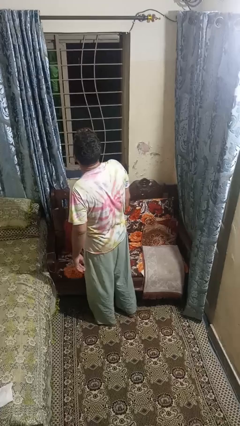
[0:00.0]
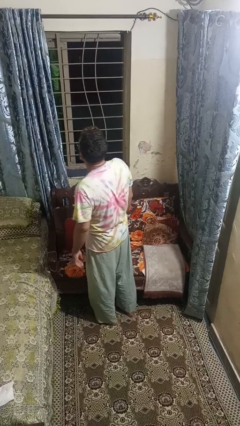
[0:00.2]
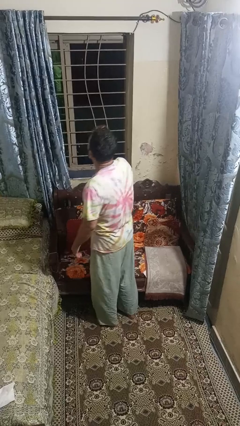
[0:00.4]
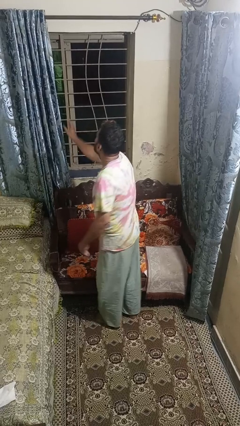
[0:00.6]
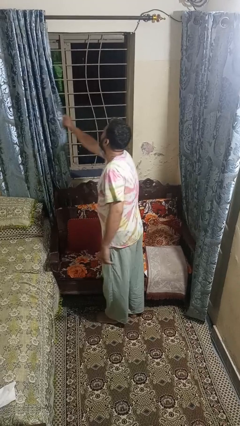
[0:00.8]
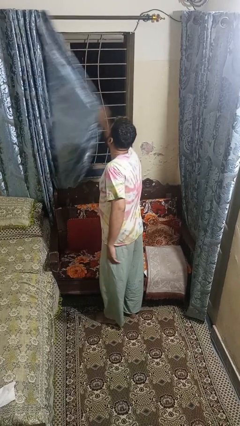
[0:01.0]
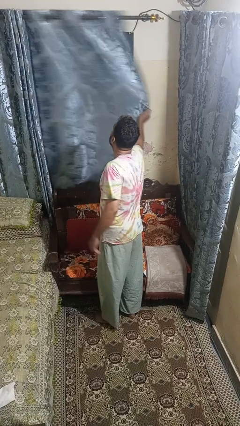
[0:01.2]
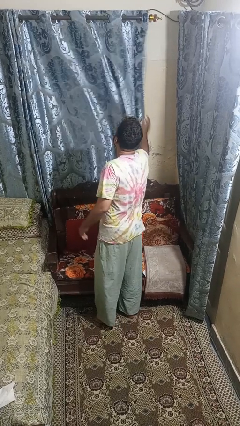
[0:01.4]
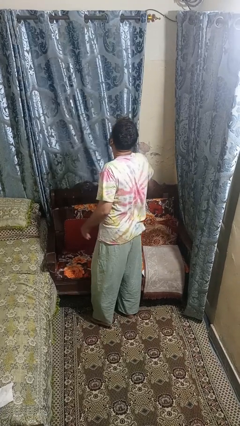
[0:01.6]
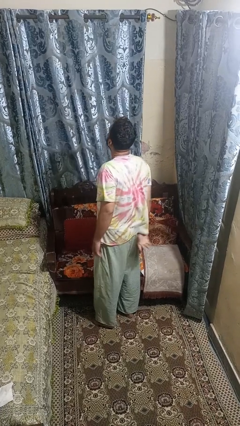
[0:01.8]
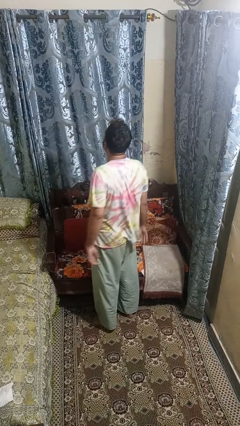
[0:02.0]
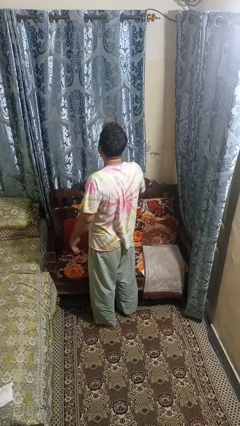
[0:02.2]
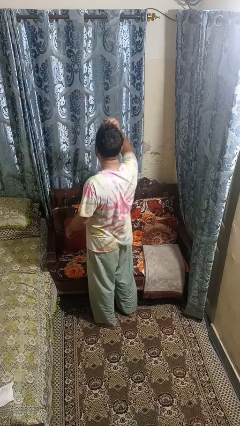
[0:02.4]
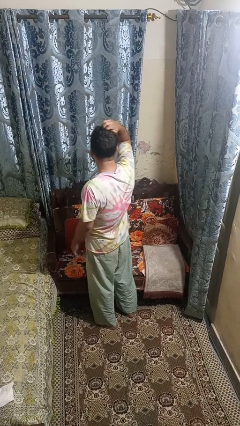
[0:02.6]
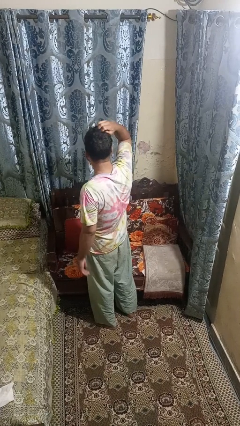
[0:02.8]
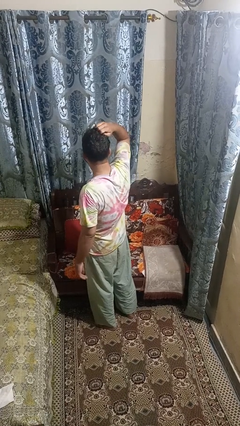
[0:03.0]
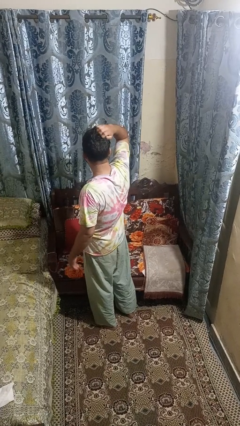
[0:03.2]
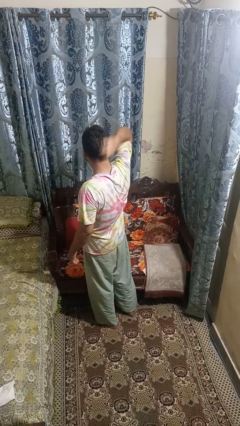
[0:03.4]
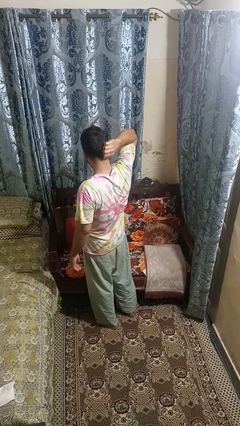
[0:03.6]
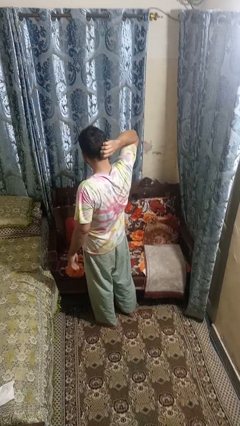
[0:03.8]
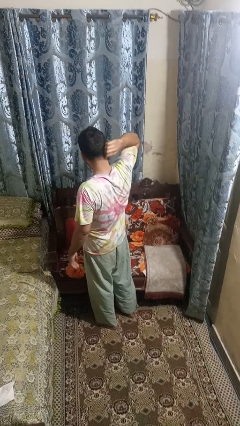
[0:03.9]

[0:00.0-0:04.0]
person closes curtains

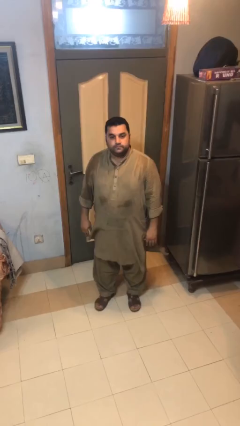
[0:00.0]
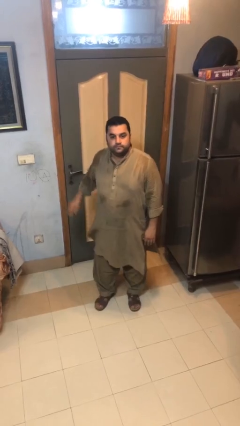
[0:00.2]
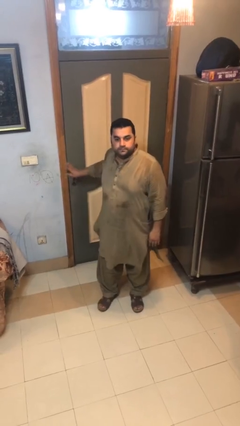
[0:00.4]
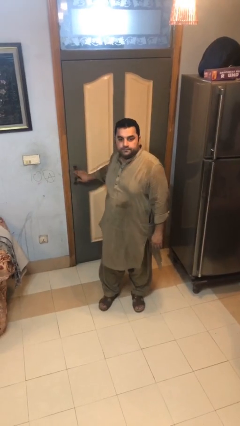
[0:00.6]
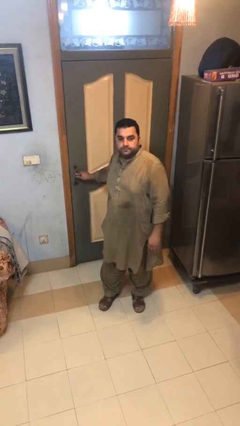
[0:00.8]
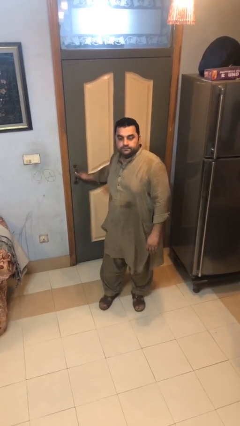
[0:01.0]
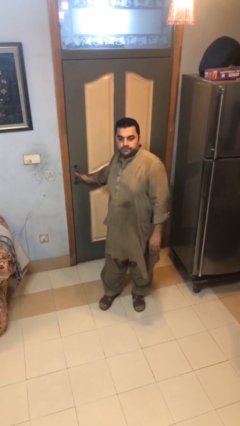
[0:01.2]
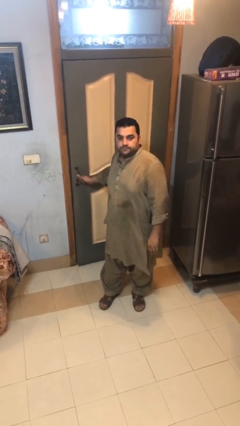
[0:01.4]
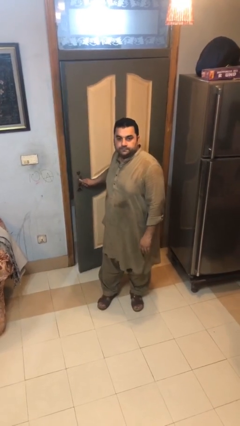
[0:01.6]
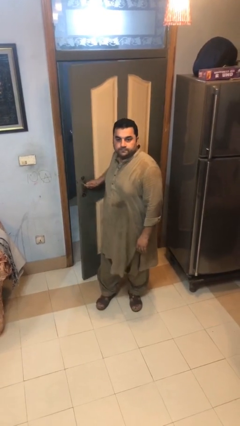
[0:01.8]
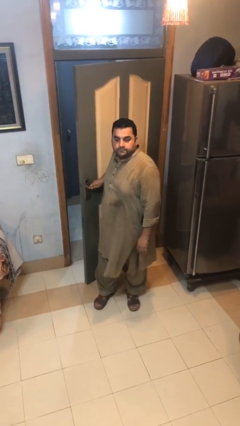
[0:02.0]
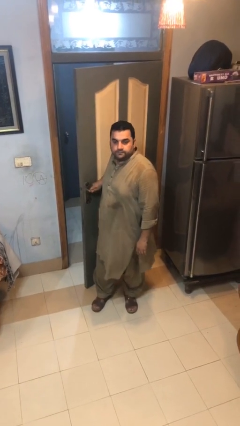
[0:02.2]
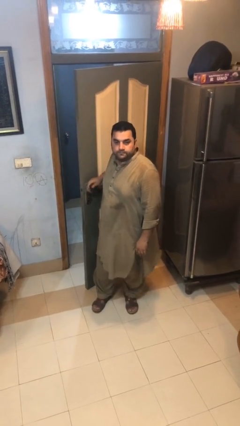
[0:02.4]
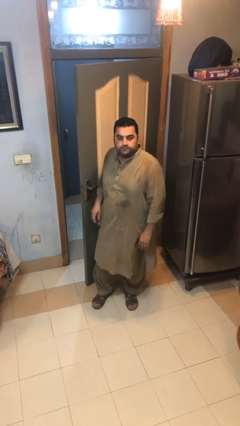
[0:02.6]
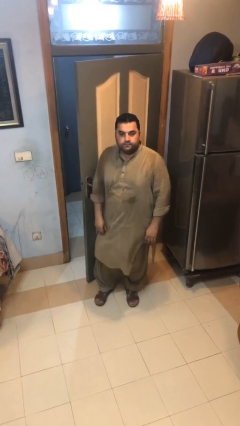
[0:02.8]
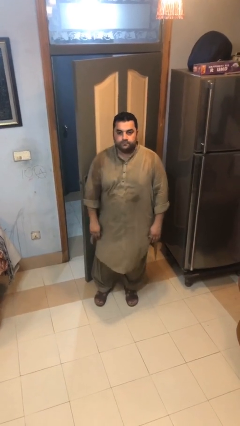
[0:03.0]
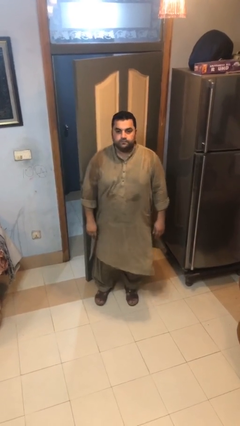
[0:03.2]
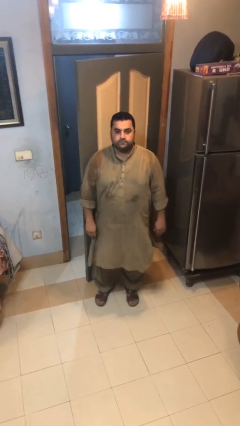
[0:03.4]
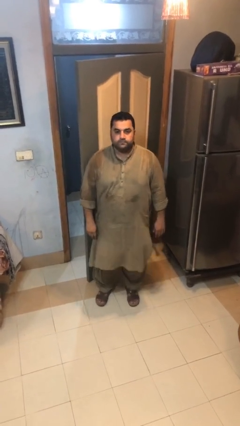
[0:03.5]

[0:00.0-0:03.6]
person opens facility door

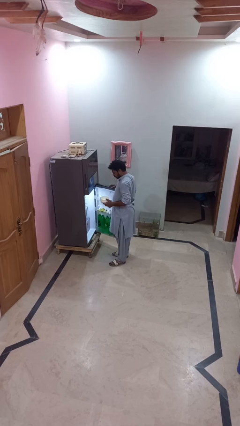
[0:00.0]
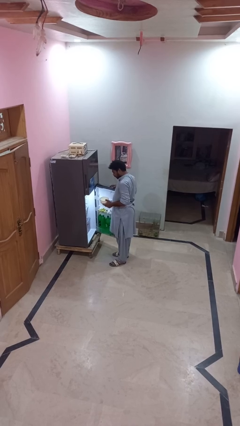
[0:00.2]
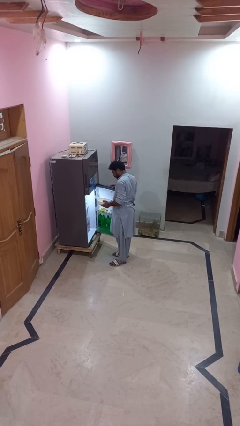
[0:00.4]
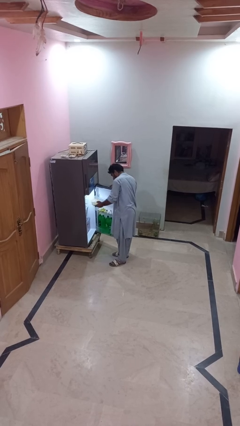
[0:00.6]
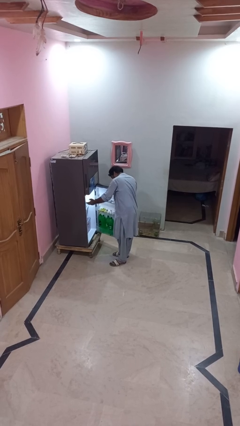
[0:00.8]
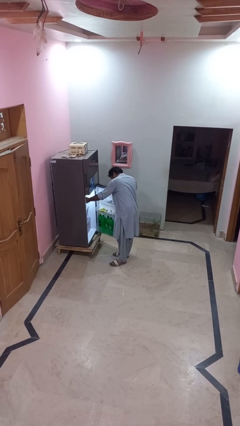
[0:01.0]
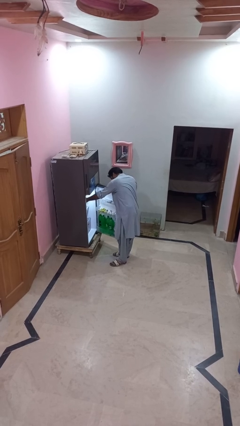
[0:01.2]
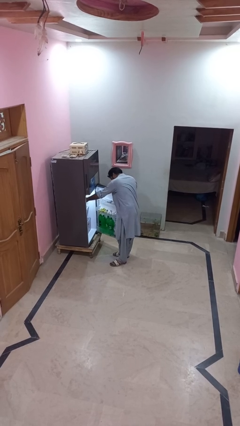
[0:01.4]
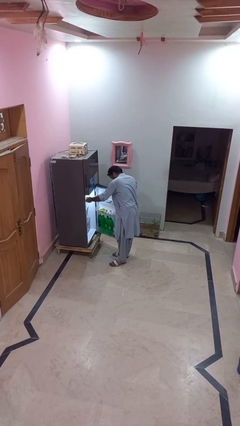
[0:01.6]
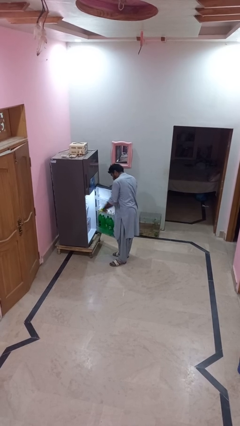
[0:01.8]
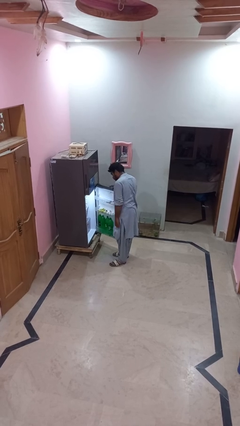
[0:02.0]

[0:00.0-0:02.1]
person puts object into refrigerator

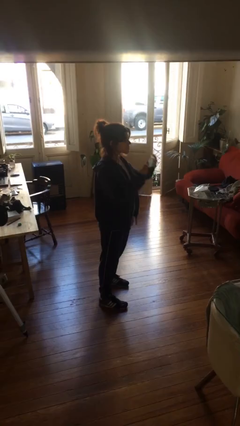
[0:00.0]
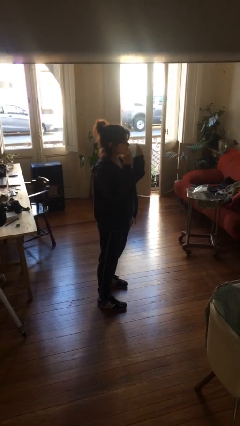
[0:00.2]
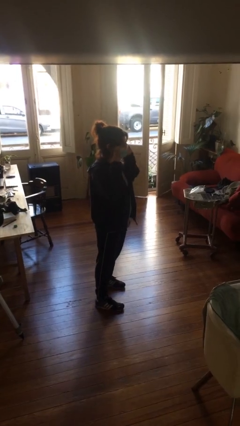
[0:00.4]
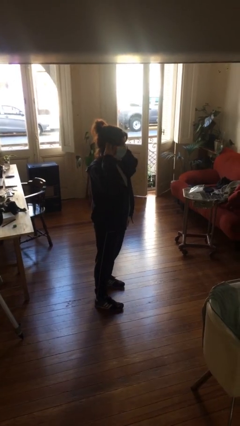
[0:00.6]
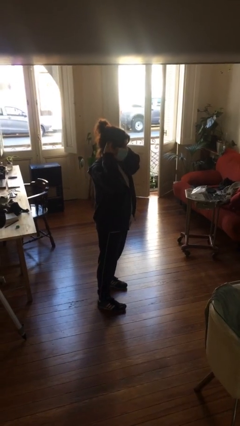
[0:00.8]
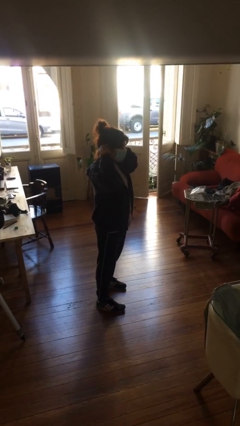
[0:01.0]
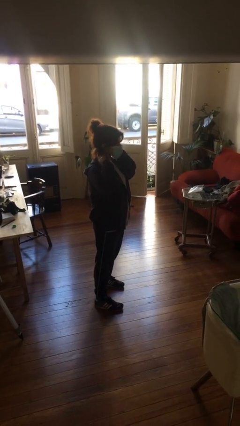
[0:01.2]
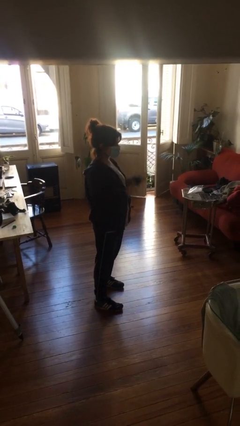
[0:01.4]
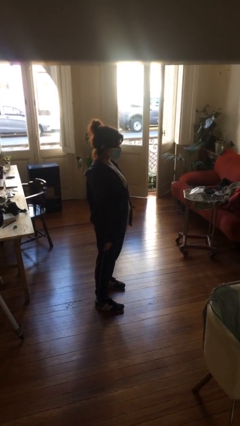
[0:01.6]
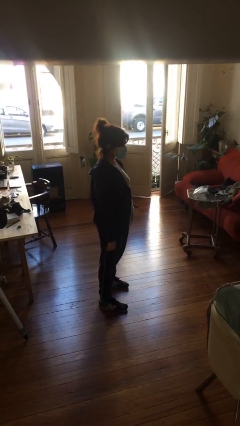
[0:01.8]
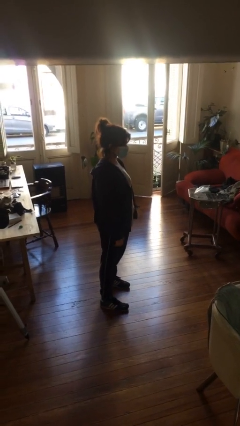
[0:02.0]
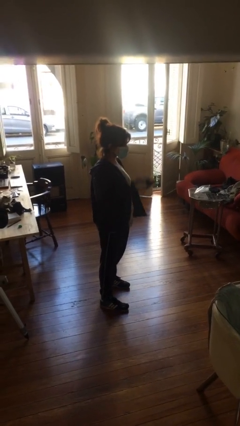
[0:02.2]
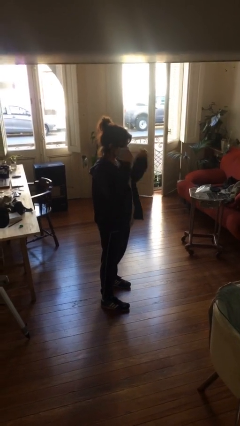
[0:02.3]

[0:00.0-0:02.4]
person puts on facemask

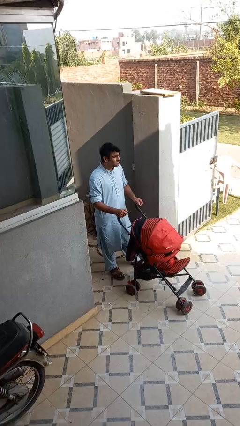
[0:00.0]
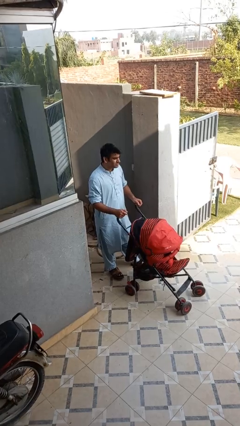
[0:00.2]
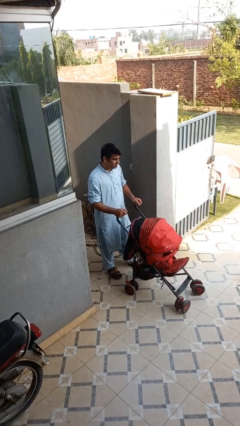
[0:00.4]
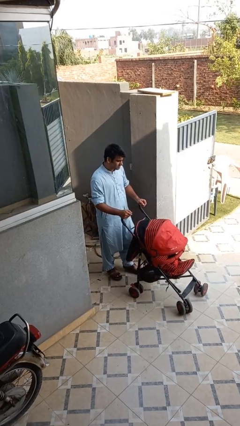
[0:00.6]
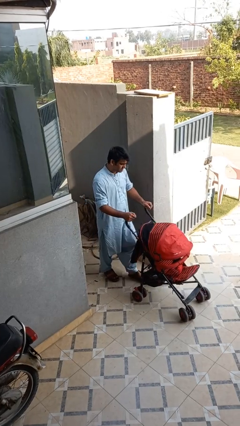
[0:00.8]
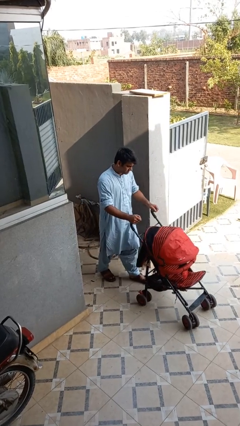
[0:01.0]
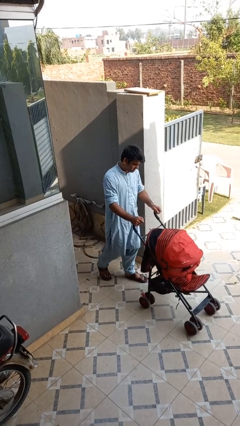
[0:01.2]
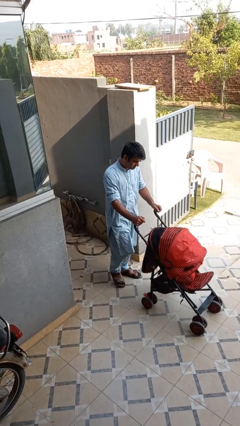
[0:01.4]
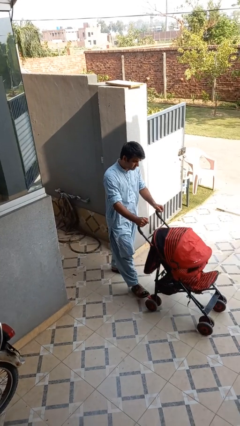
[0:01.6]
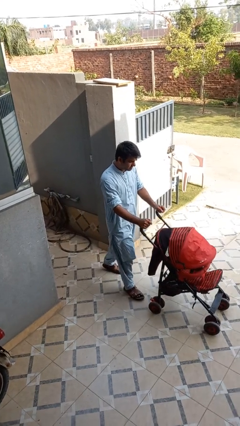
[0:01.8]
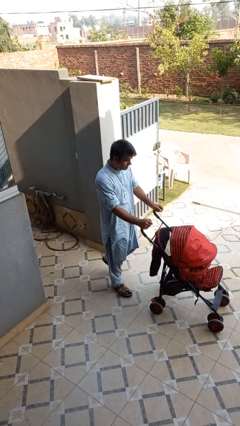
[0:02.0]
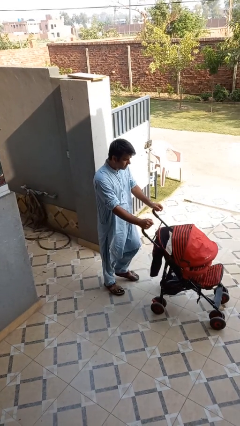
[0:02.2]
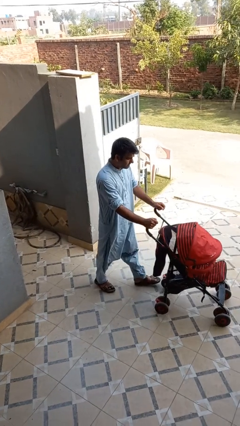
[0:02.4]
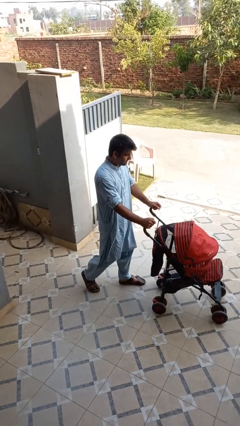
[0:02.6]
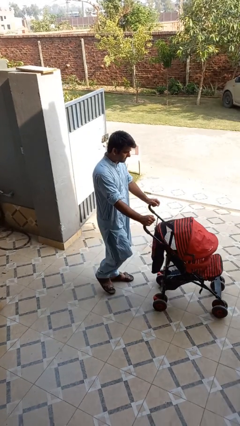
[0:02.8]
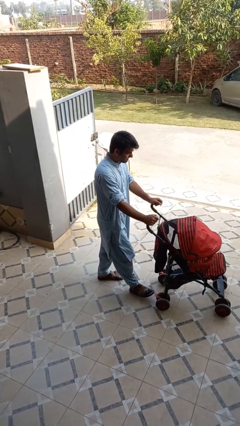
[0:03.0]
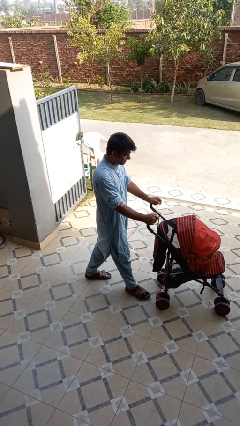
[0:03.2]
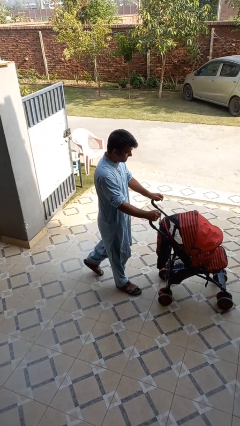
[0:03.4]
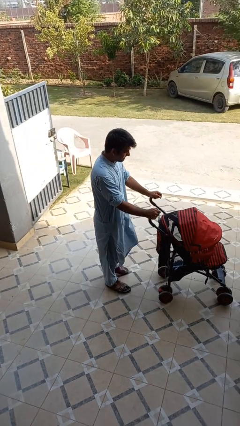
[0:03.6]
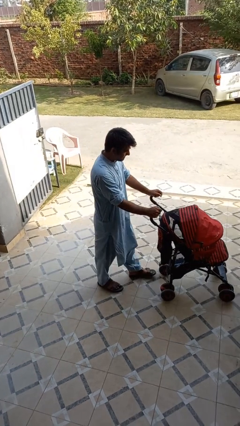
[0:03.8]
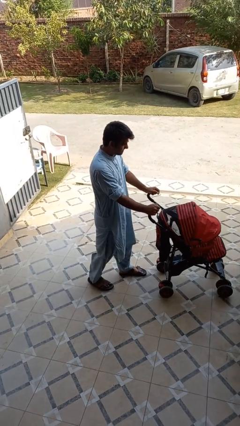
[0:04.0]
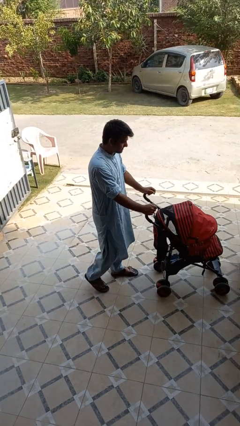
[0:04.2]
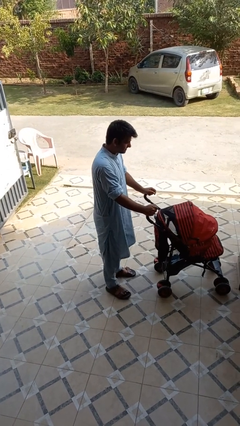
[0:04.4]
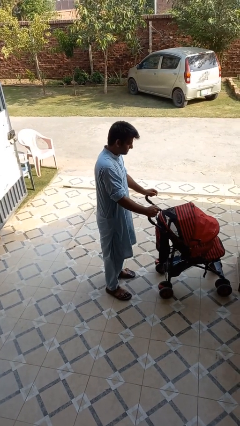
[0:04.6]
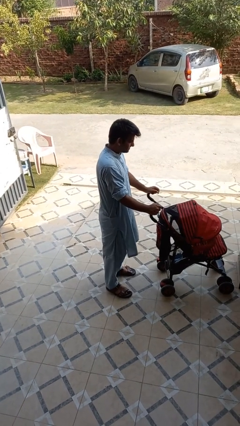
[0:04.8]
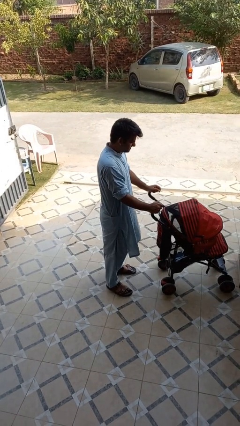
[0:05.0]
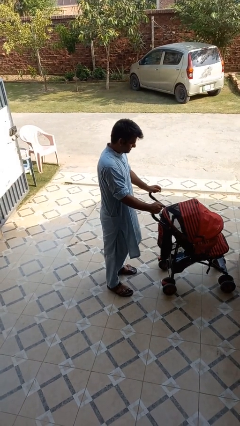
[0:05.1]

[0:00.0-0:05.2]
person pushes wheeled cart

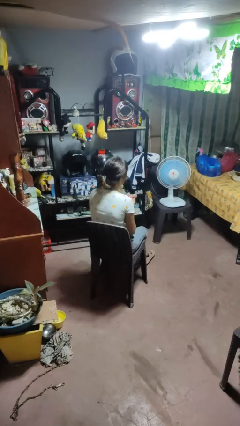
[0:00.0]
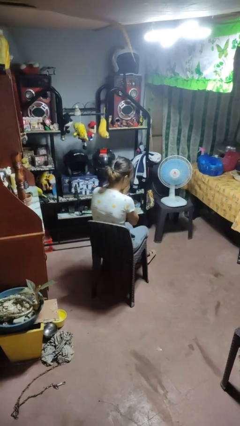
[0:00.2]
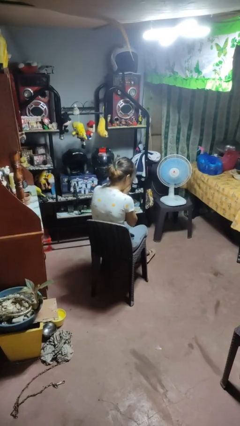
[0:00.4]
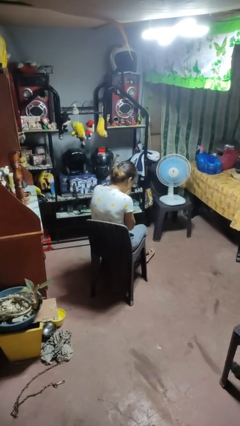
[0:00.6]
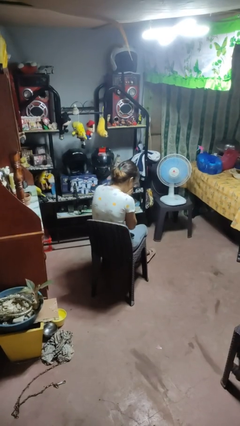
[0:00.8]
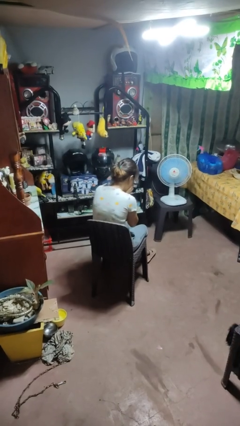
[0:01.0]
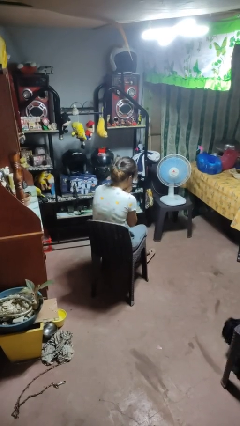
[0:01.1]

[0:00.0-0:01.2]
person sneezes into hand
